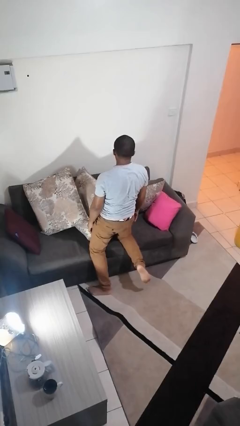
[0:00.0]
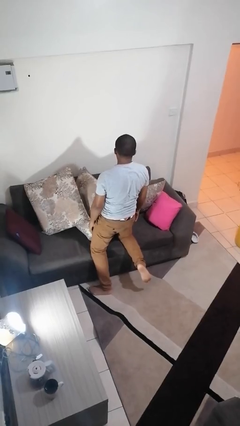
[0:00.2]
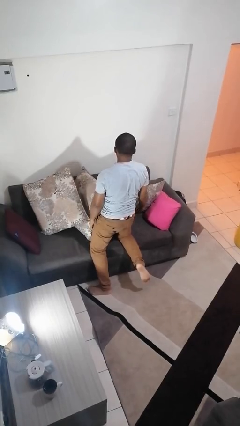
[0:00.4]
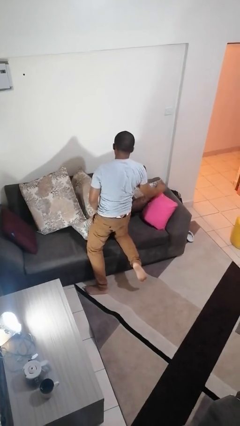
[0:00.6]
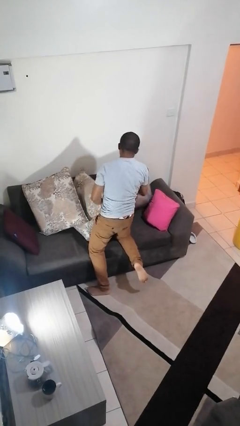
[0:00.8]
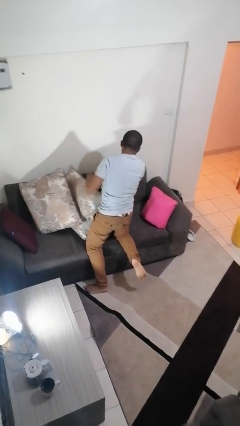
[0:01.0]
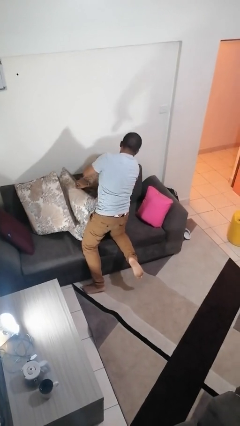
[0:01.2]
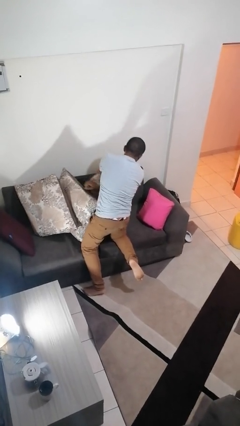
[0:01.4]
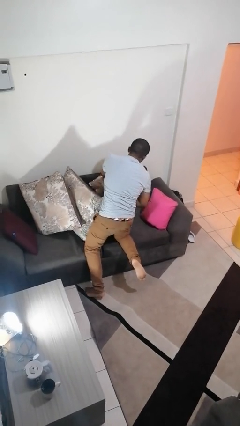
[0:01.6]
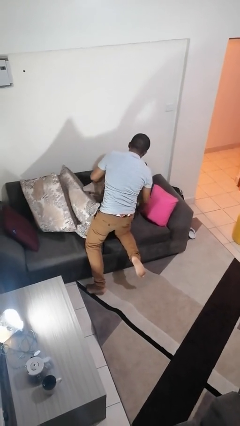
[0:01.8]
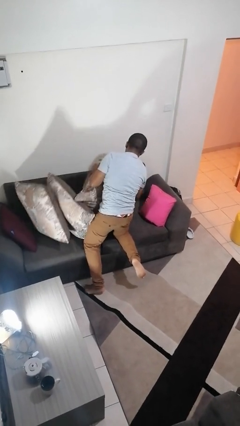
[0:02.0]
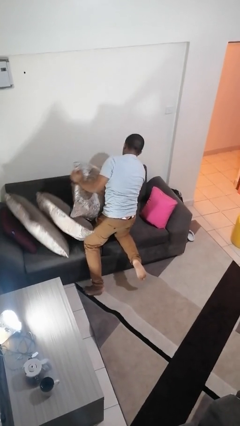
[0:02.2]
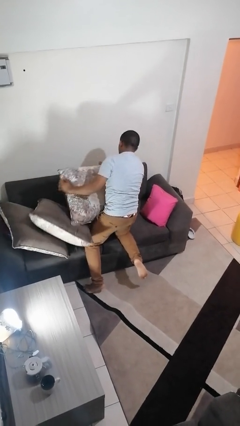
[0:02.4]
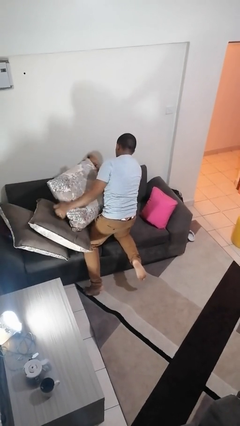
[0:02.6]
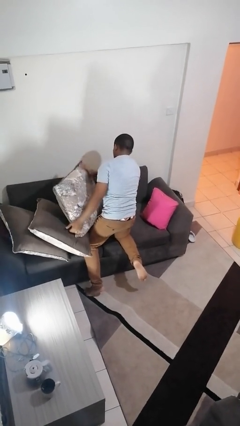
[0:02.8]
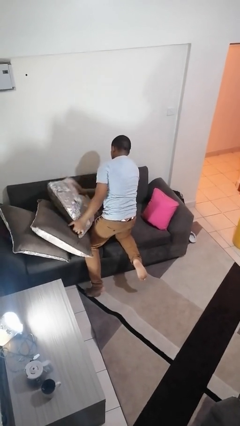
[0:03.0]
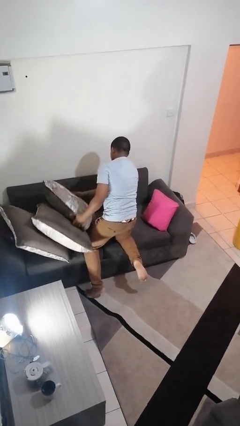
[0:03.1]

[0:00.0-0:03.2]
person searches in couch

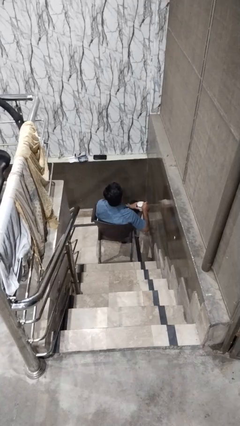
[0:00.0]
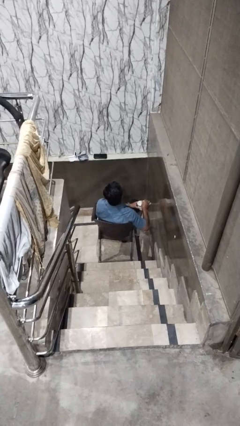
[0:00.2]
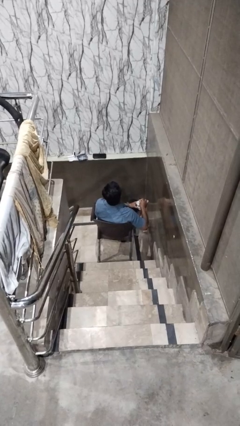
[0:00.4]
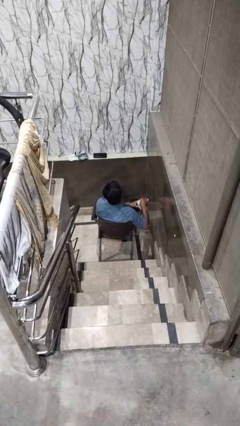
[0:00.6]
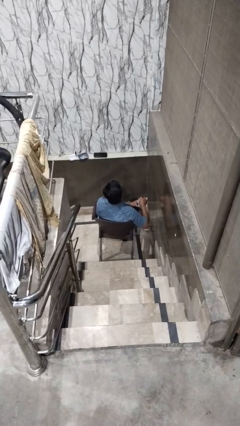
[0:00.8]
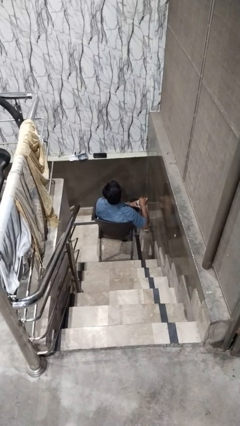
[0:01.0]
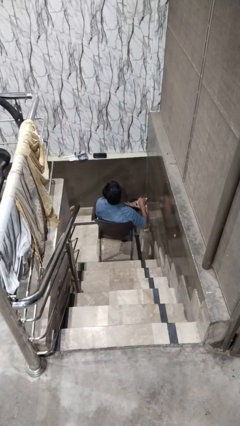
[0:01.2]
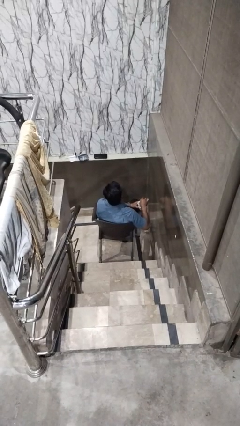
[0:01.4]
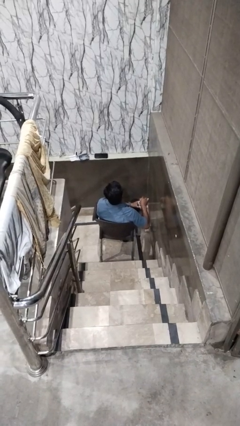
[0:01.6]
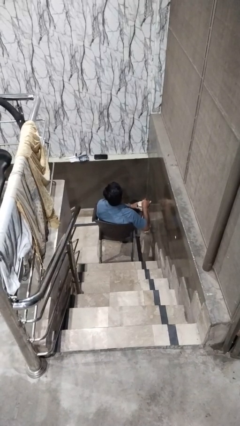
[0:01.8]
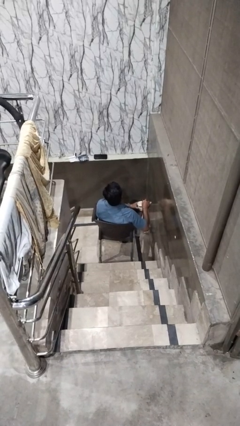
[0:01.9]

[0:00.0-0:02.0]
person stirs mug

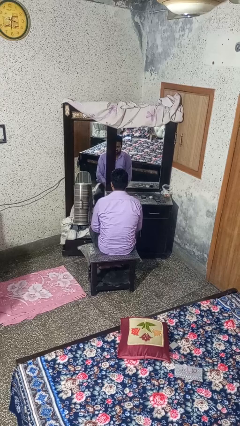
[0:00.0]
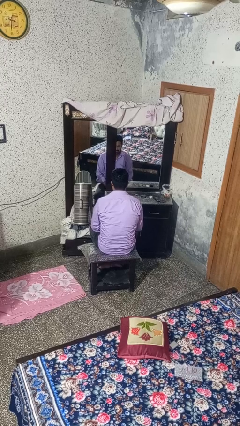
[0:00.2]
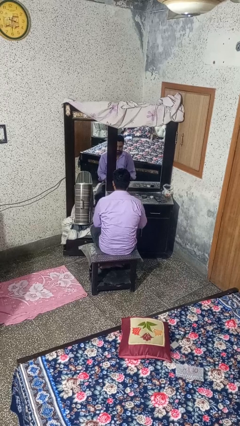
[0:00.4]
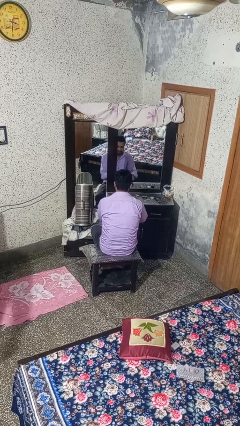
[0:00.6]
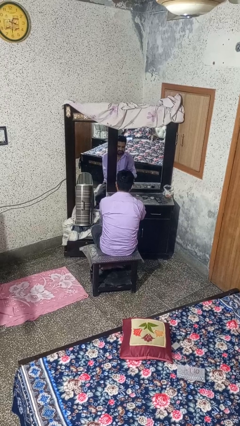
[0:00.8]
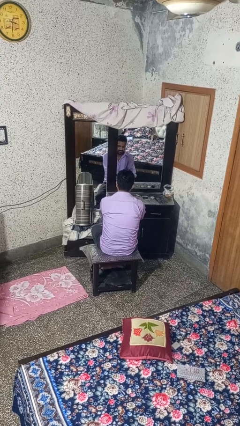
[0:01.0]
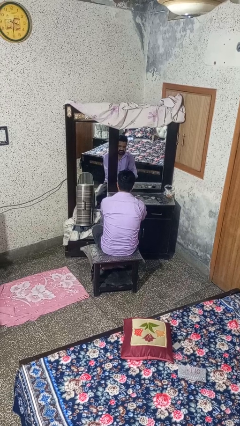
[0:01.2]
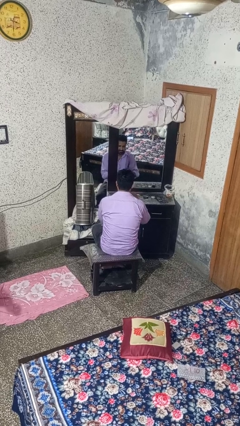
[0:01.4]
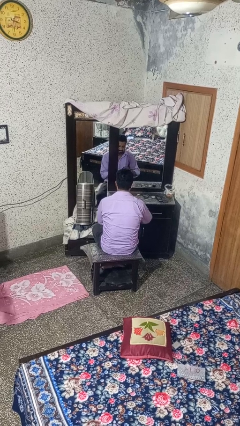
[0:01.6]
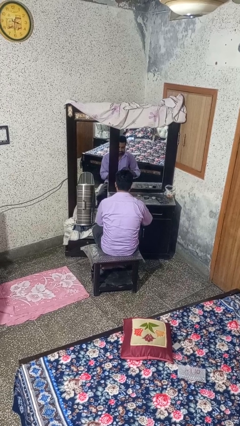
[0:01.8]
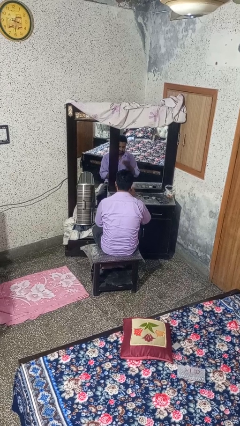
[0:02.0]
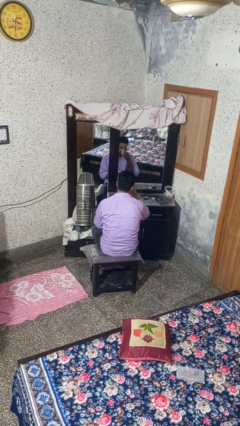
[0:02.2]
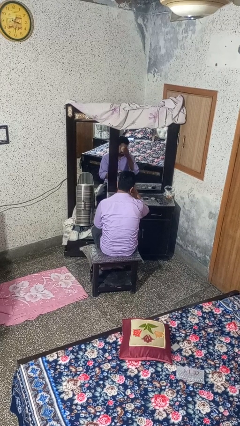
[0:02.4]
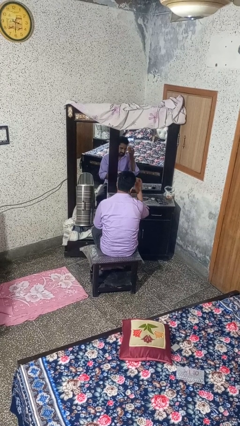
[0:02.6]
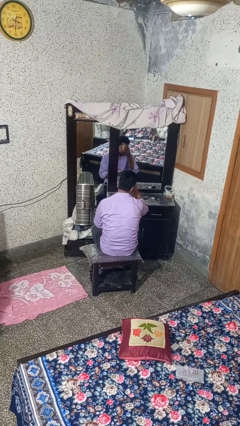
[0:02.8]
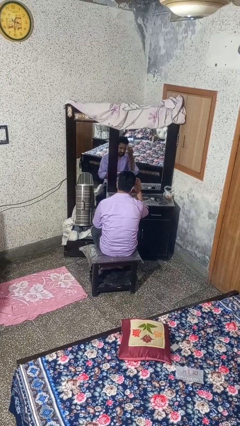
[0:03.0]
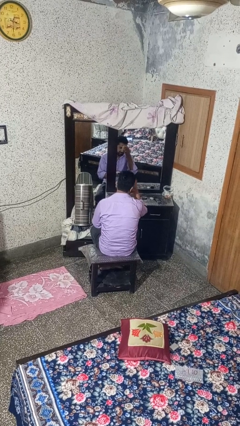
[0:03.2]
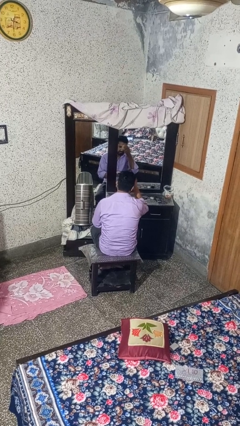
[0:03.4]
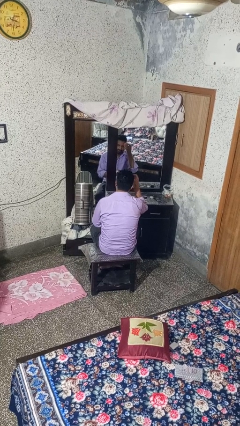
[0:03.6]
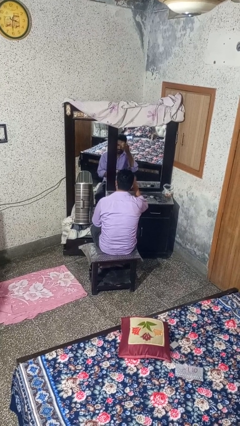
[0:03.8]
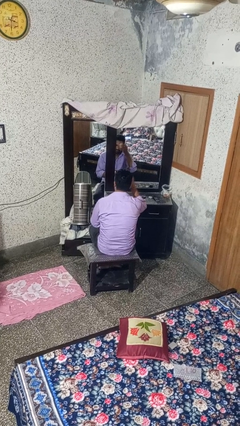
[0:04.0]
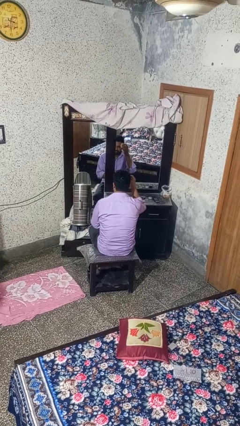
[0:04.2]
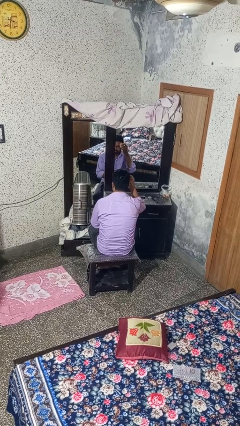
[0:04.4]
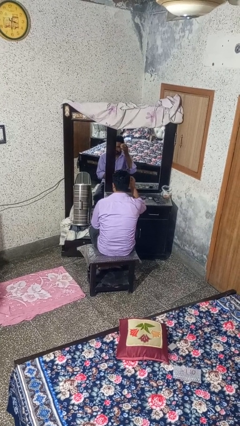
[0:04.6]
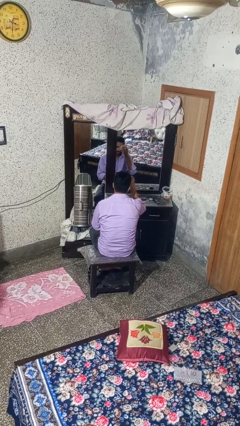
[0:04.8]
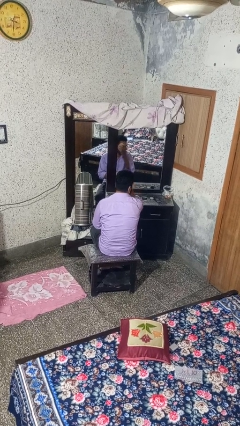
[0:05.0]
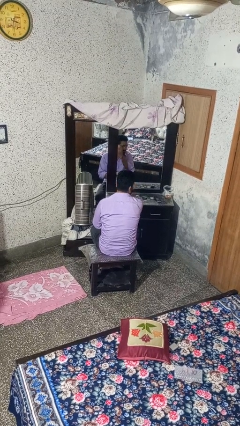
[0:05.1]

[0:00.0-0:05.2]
person applies foundation makeup

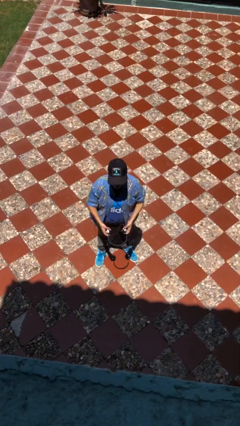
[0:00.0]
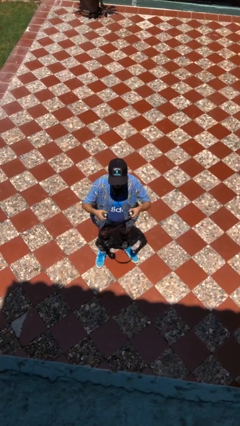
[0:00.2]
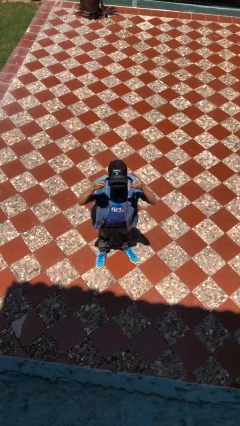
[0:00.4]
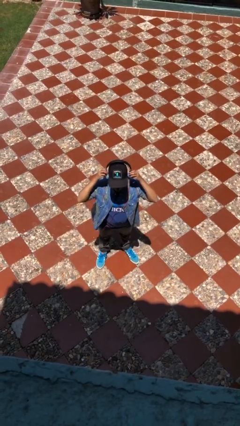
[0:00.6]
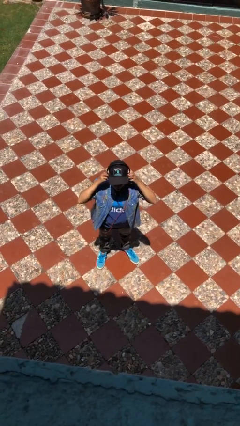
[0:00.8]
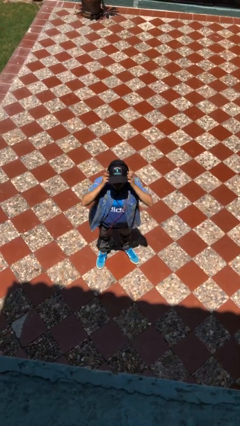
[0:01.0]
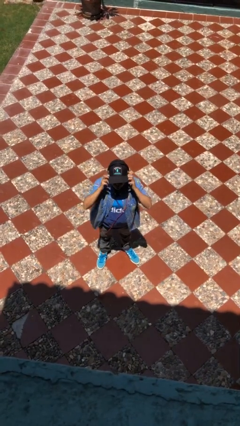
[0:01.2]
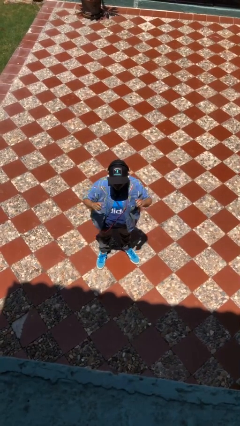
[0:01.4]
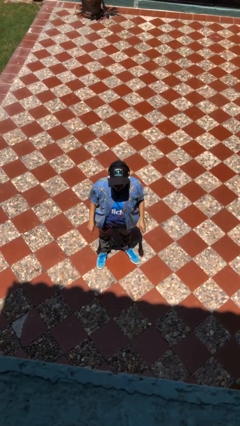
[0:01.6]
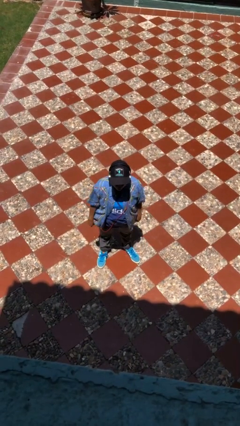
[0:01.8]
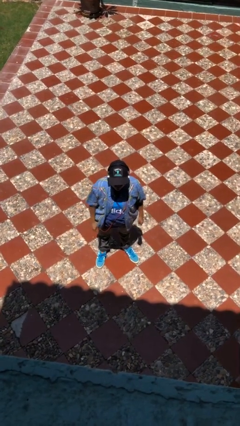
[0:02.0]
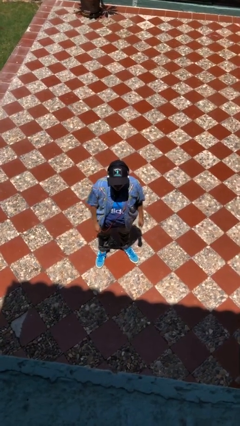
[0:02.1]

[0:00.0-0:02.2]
person puts on headphones

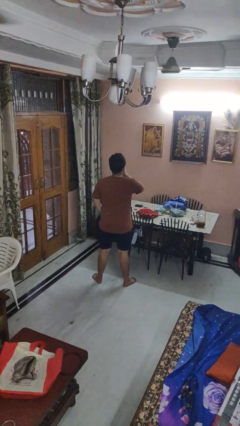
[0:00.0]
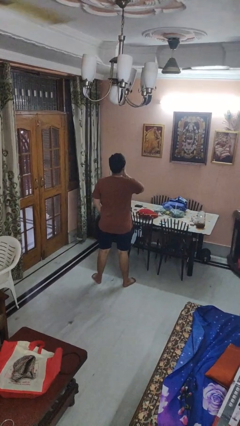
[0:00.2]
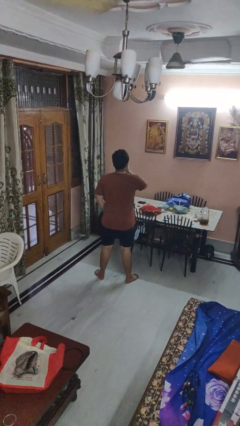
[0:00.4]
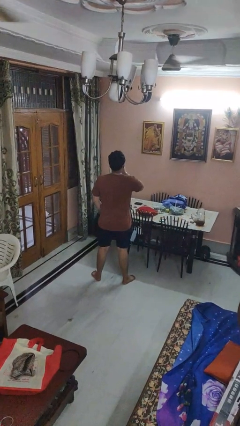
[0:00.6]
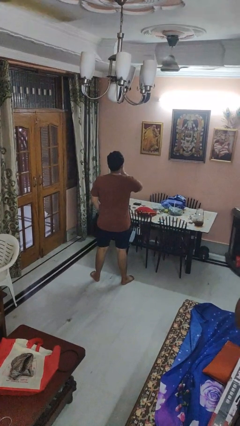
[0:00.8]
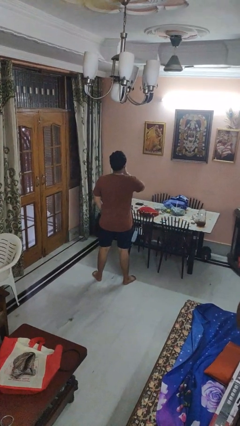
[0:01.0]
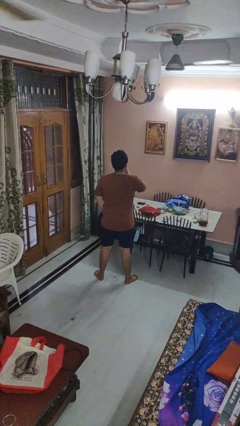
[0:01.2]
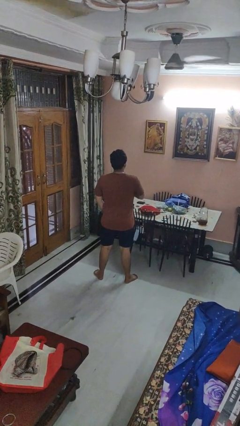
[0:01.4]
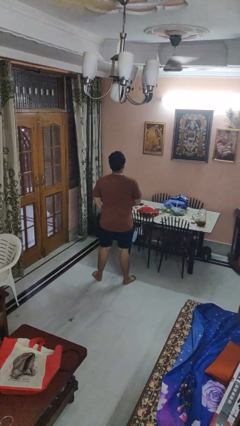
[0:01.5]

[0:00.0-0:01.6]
person gestures be quiet

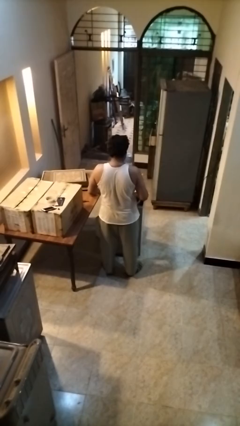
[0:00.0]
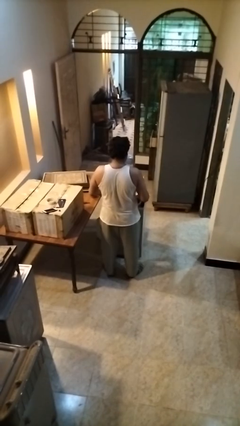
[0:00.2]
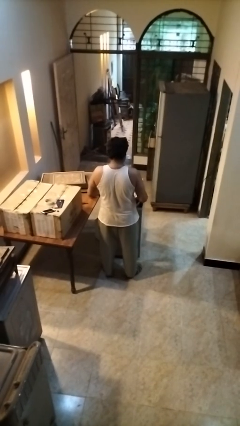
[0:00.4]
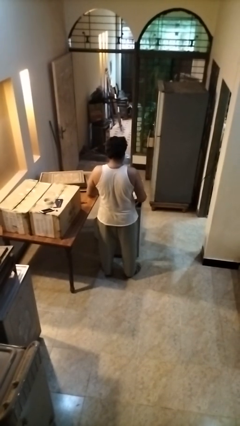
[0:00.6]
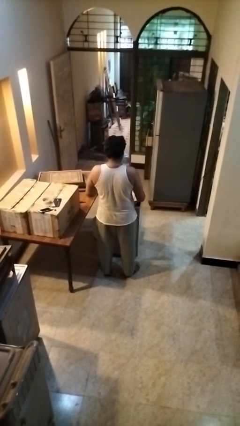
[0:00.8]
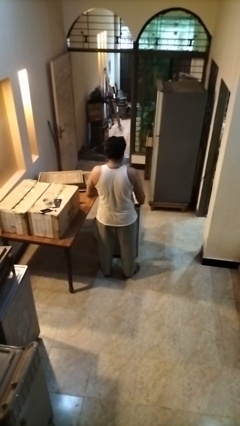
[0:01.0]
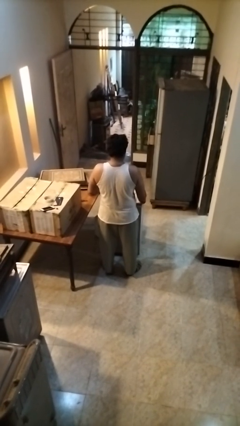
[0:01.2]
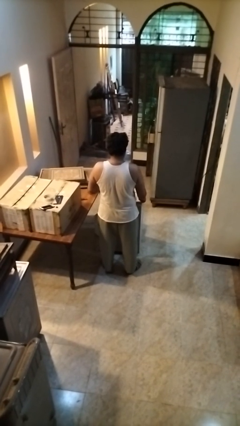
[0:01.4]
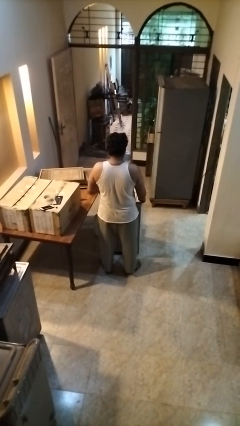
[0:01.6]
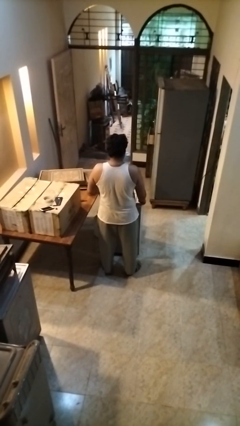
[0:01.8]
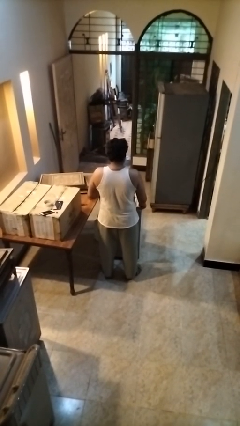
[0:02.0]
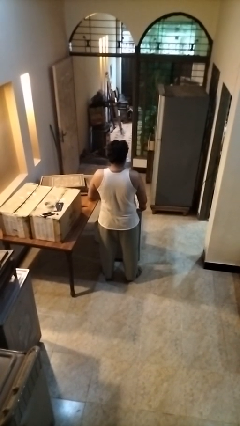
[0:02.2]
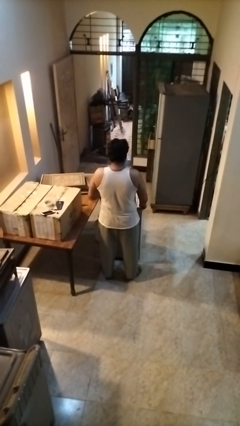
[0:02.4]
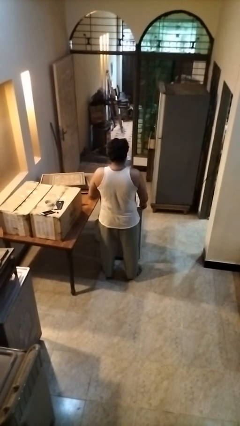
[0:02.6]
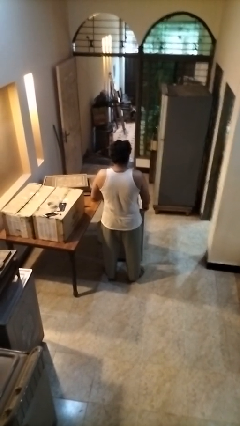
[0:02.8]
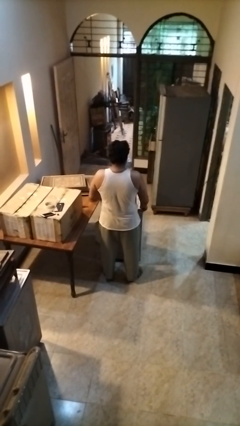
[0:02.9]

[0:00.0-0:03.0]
person closes clothes washer
